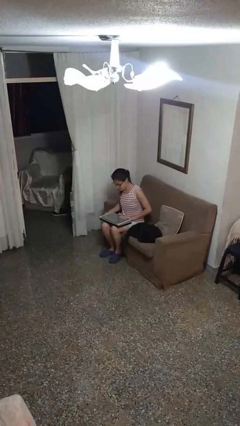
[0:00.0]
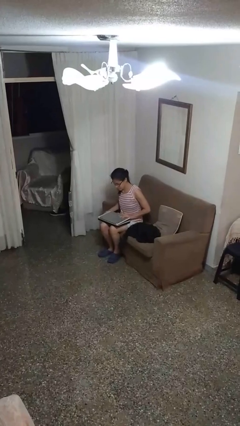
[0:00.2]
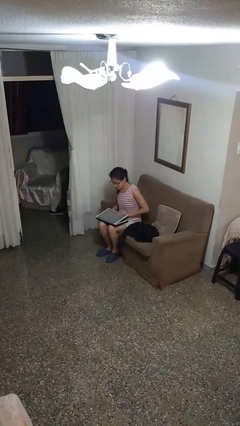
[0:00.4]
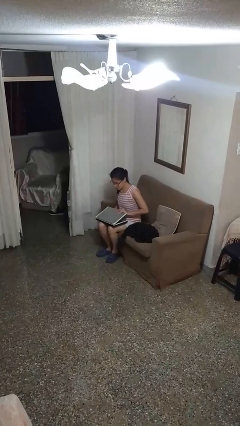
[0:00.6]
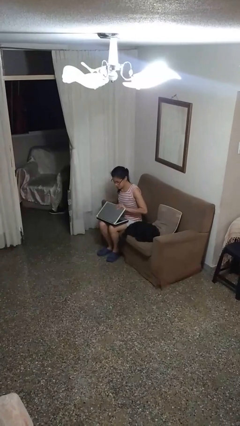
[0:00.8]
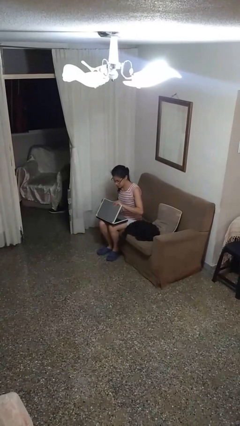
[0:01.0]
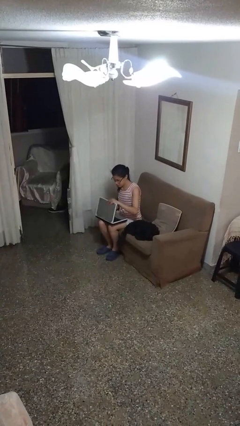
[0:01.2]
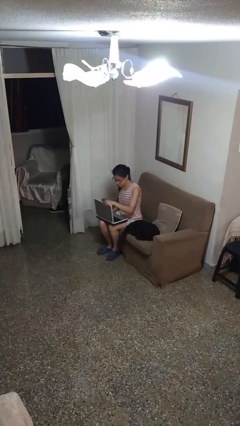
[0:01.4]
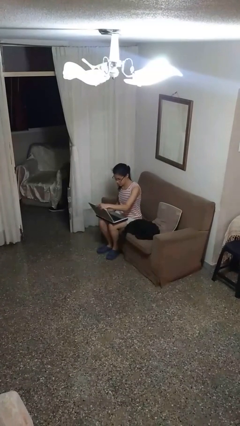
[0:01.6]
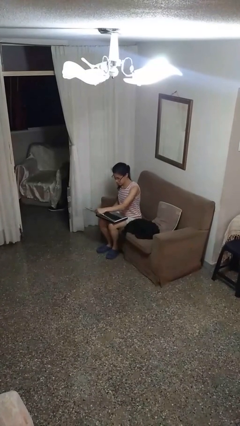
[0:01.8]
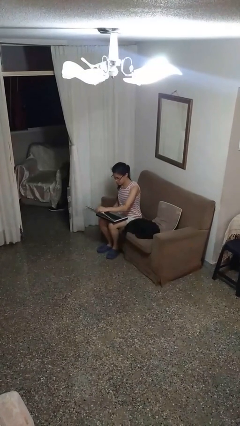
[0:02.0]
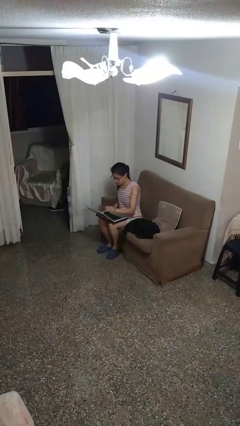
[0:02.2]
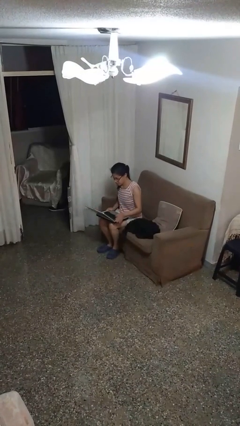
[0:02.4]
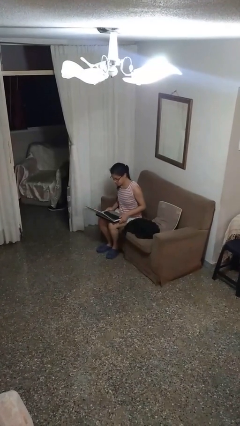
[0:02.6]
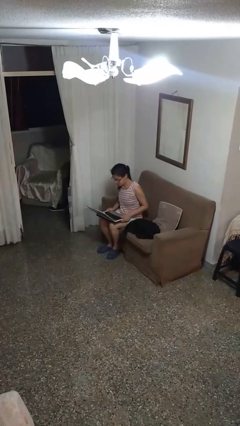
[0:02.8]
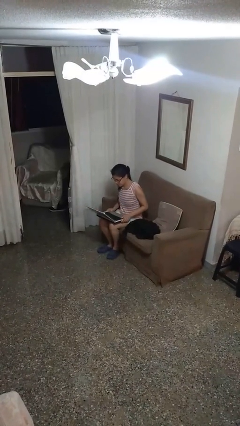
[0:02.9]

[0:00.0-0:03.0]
person opens laptop

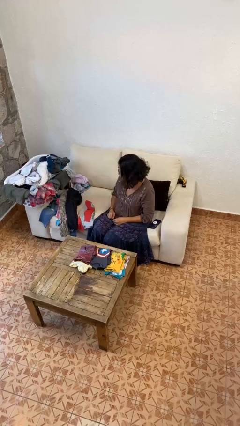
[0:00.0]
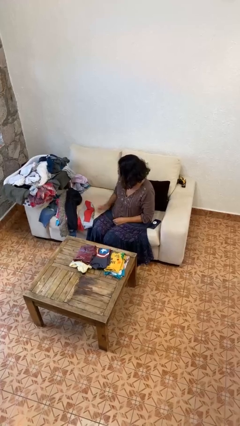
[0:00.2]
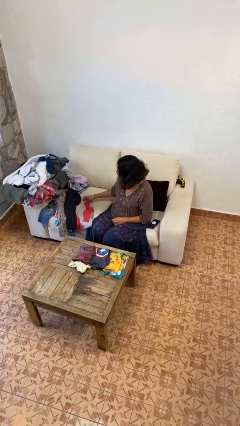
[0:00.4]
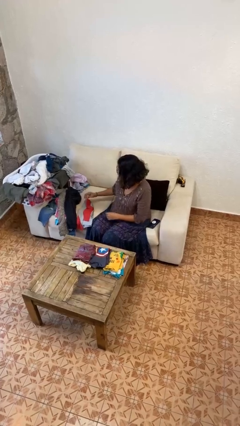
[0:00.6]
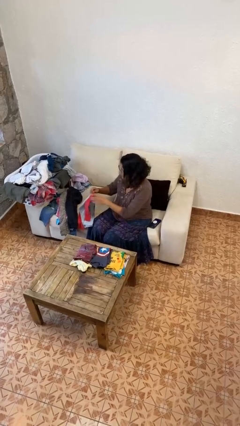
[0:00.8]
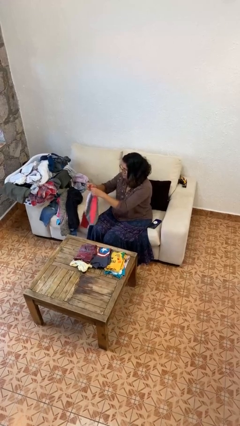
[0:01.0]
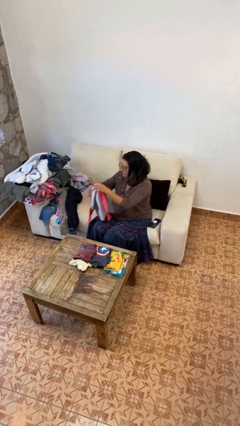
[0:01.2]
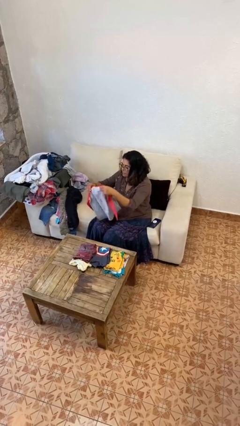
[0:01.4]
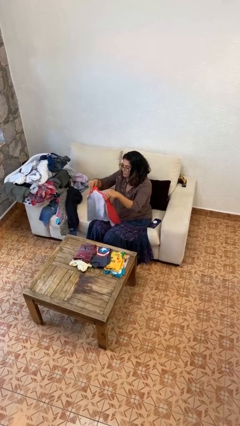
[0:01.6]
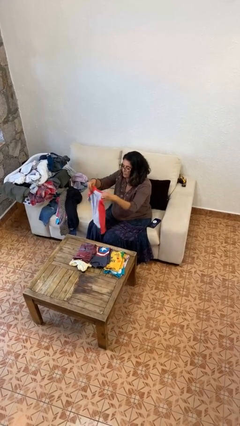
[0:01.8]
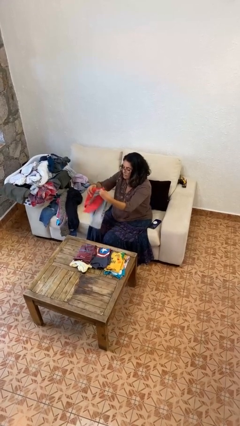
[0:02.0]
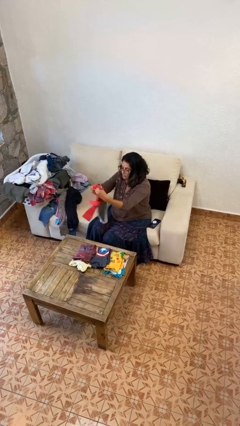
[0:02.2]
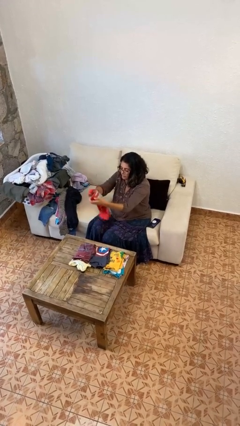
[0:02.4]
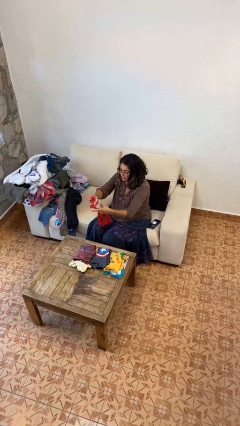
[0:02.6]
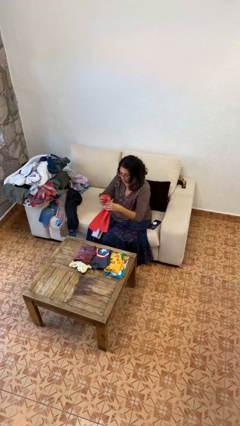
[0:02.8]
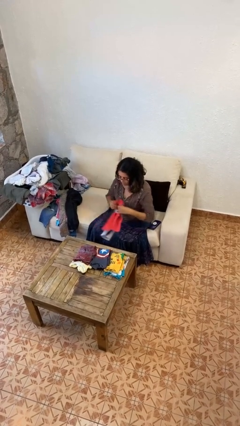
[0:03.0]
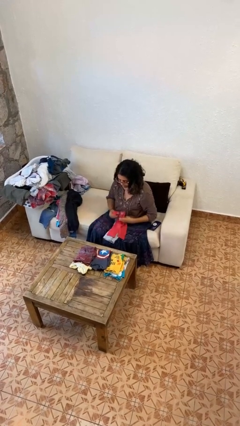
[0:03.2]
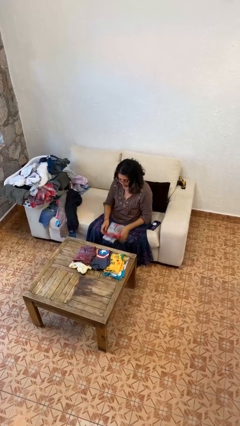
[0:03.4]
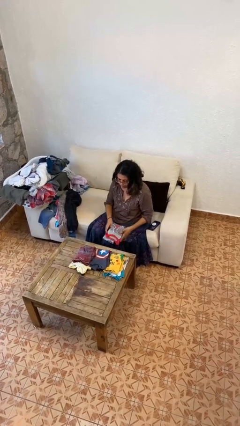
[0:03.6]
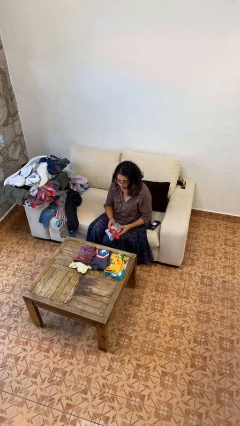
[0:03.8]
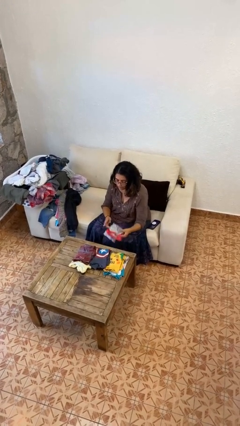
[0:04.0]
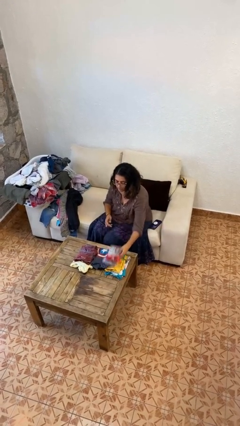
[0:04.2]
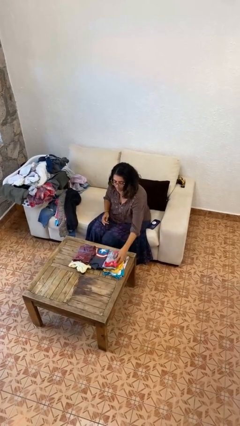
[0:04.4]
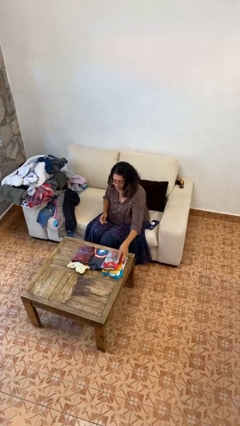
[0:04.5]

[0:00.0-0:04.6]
person folds shirt

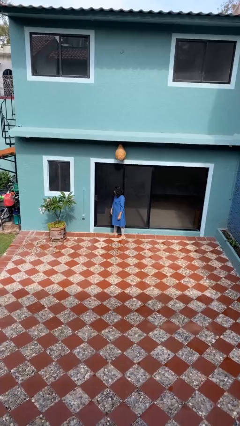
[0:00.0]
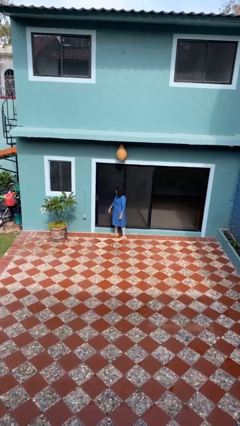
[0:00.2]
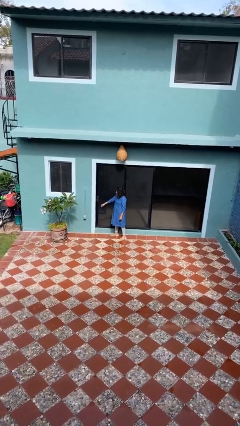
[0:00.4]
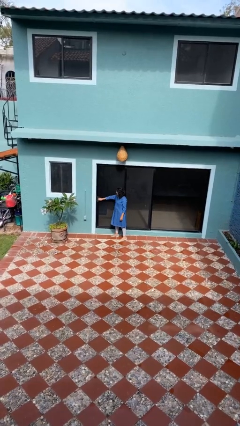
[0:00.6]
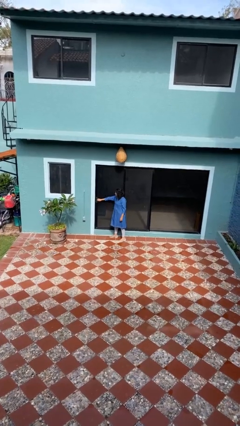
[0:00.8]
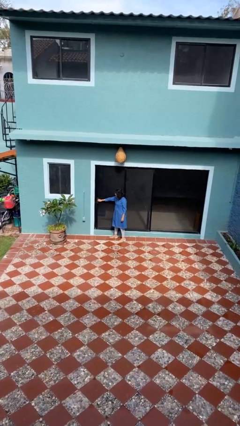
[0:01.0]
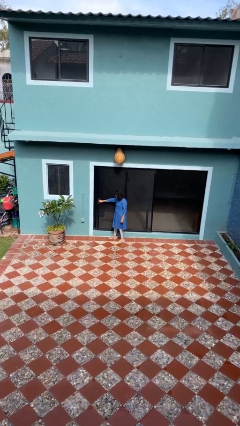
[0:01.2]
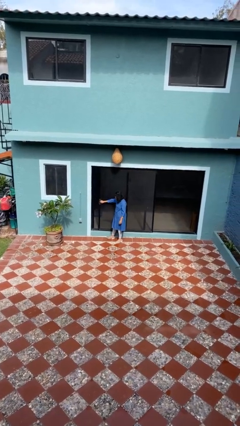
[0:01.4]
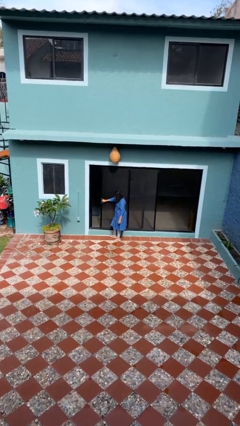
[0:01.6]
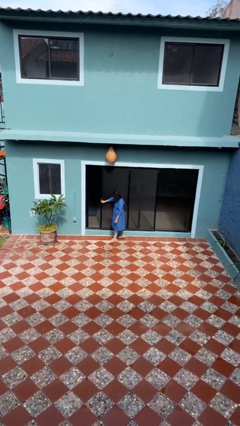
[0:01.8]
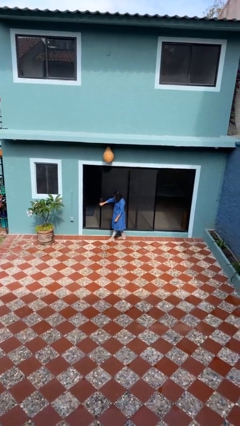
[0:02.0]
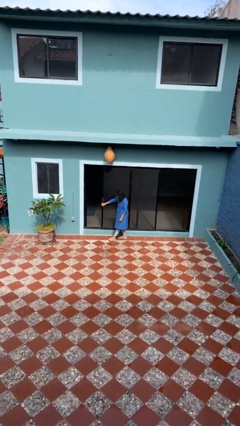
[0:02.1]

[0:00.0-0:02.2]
person opens sliding door

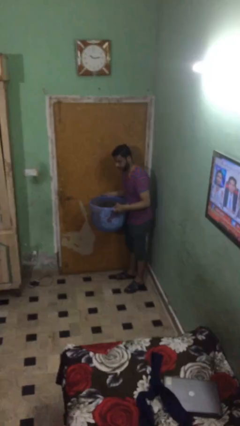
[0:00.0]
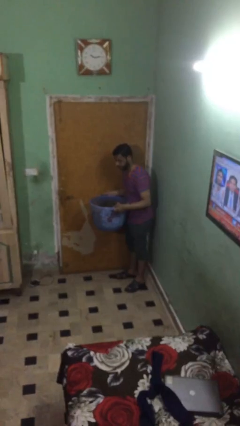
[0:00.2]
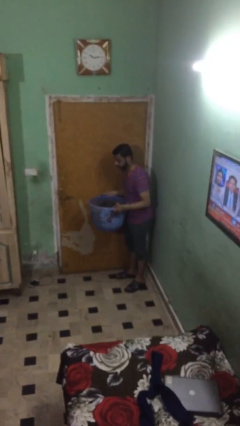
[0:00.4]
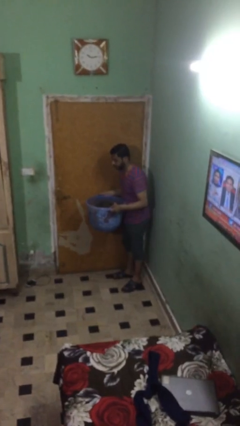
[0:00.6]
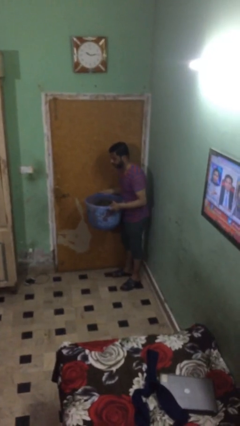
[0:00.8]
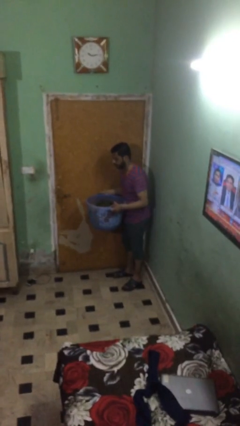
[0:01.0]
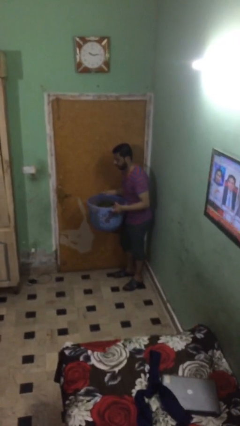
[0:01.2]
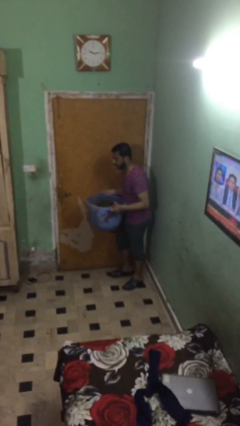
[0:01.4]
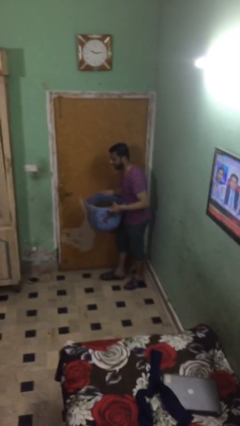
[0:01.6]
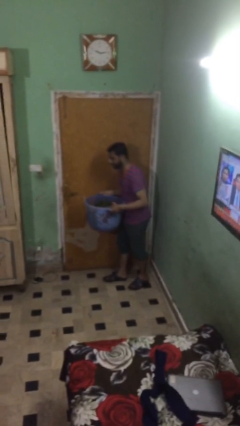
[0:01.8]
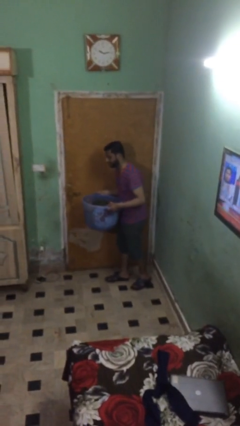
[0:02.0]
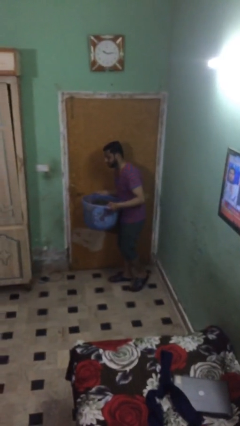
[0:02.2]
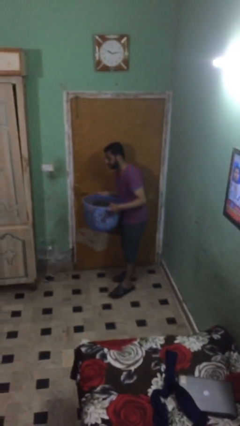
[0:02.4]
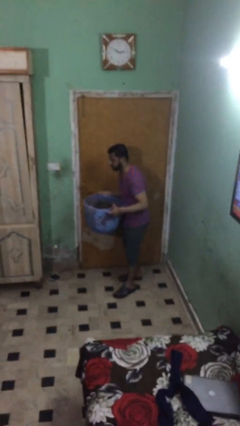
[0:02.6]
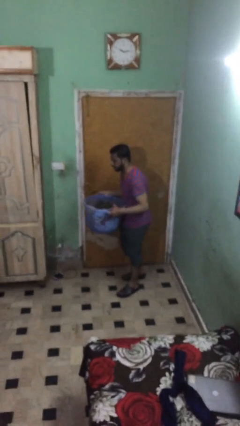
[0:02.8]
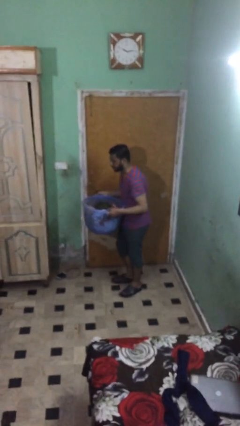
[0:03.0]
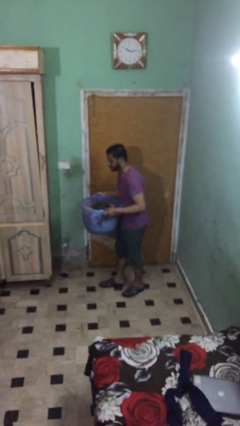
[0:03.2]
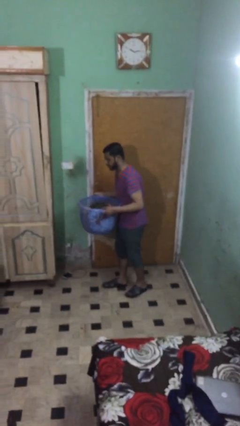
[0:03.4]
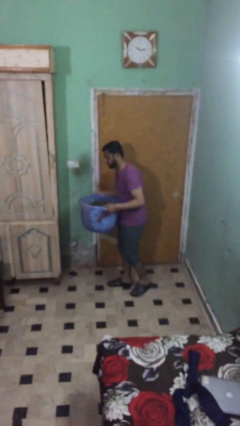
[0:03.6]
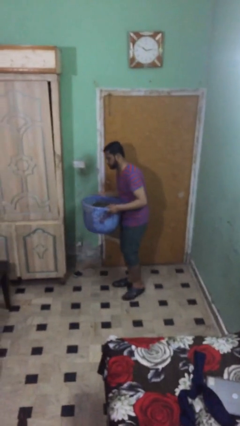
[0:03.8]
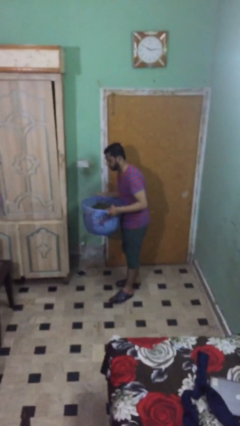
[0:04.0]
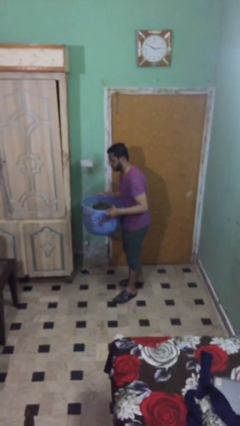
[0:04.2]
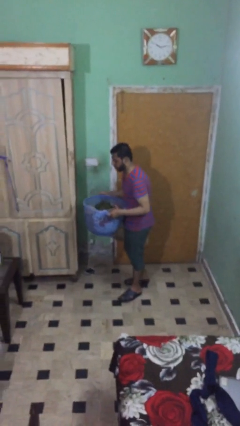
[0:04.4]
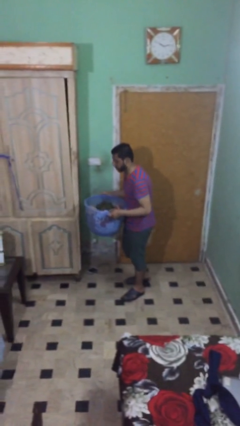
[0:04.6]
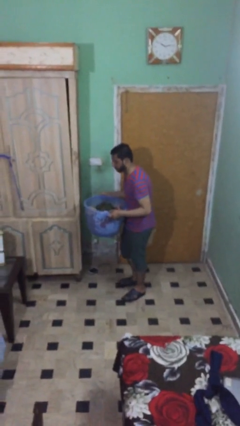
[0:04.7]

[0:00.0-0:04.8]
person carries heavy object

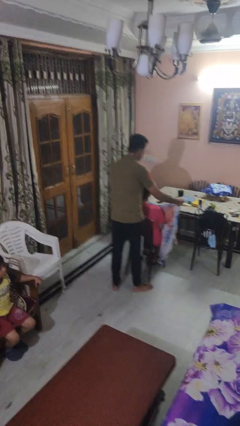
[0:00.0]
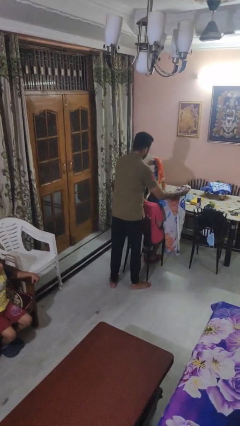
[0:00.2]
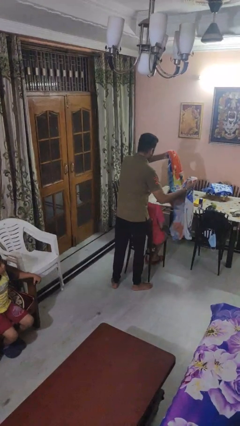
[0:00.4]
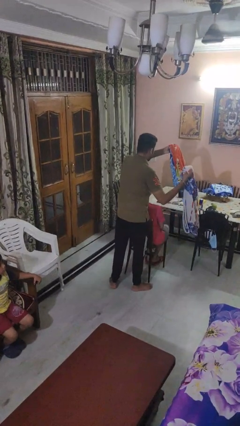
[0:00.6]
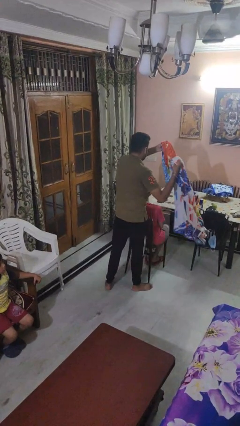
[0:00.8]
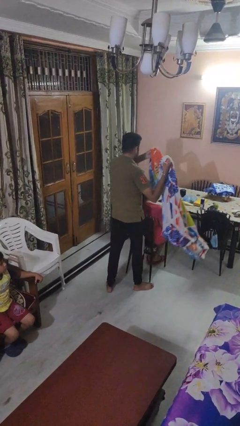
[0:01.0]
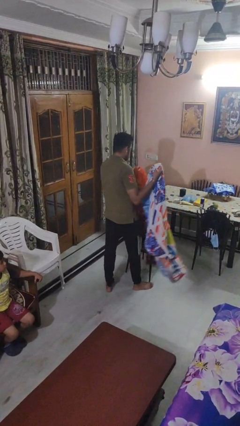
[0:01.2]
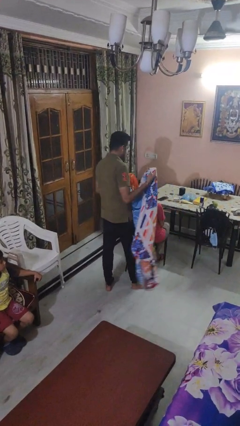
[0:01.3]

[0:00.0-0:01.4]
person uncovers friend with blanket

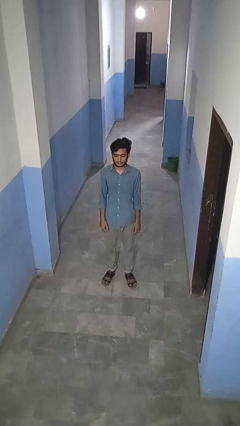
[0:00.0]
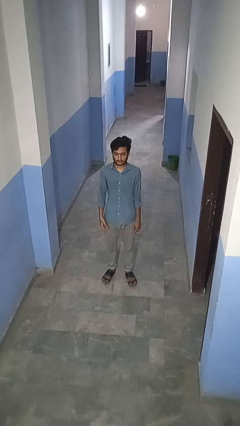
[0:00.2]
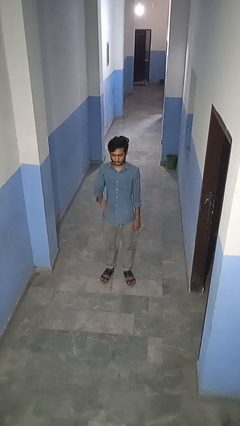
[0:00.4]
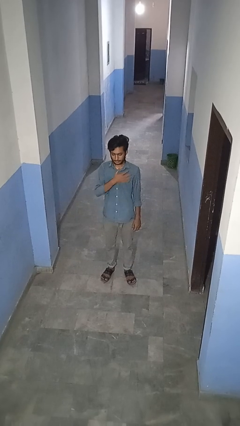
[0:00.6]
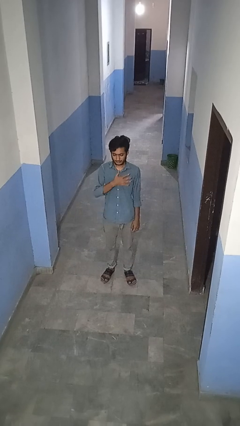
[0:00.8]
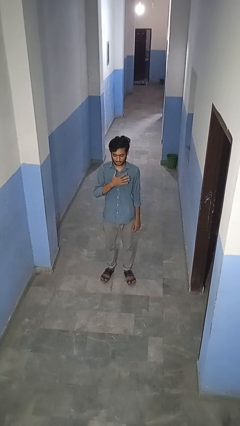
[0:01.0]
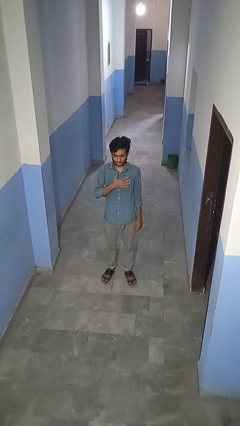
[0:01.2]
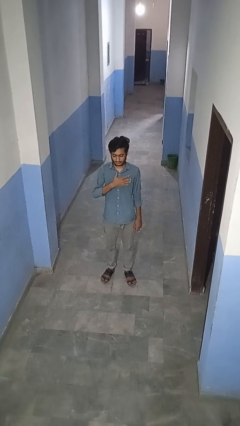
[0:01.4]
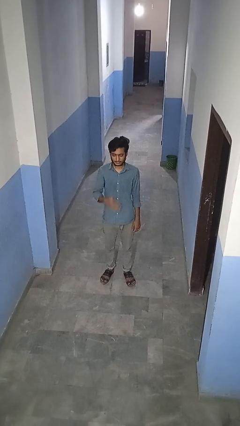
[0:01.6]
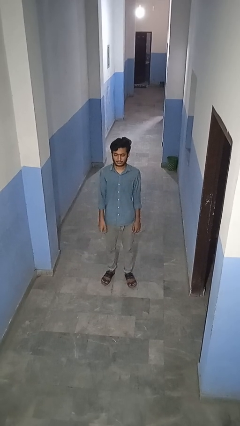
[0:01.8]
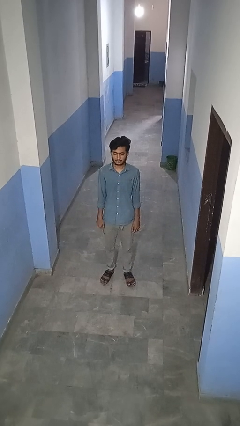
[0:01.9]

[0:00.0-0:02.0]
person drums on chest
